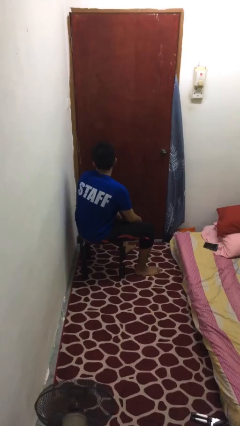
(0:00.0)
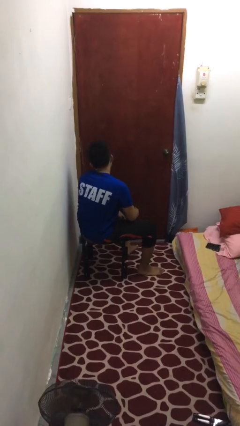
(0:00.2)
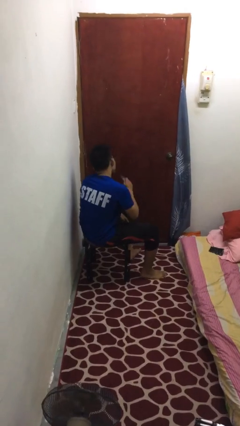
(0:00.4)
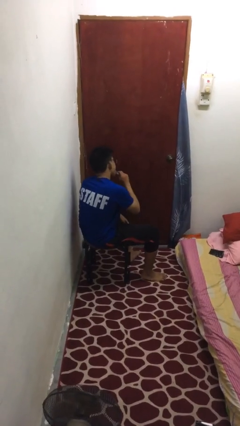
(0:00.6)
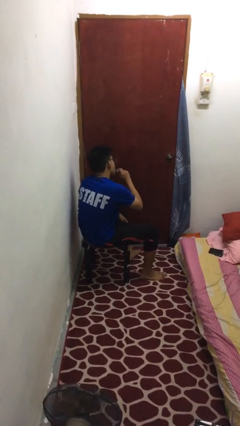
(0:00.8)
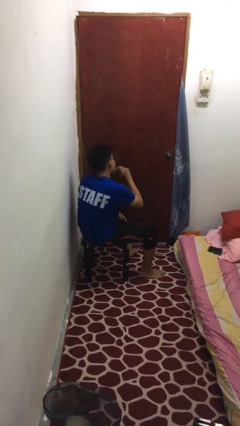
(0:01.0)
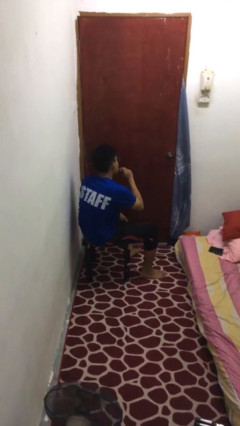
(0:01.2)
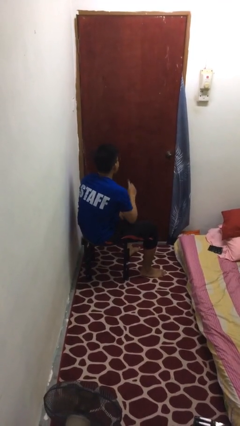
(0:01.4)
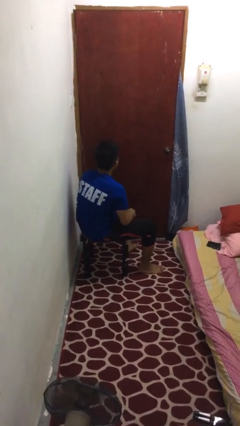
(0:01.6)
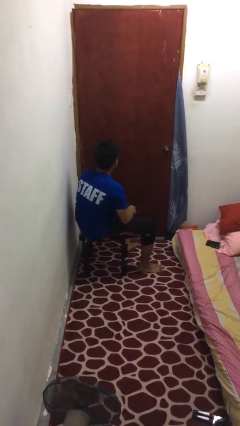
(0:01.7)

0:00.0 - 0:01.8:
person vapes

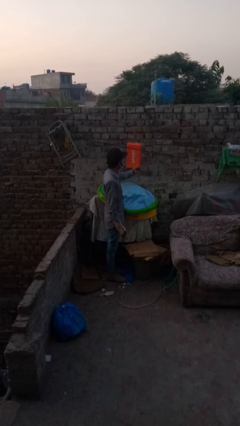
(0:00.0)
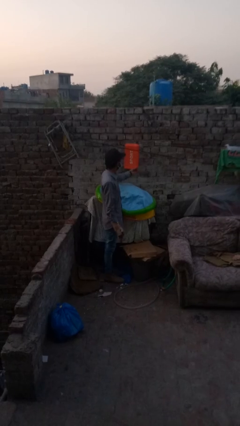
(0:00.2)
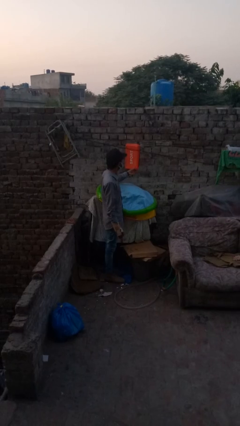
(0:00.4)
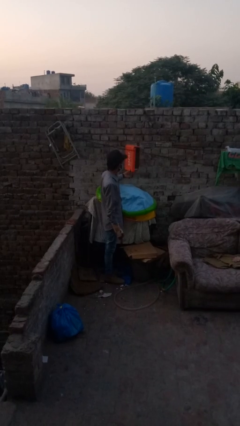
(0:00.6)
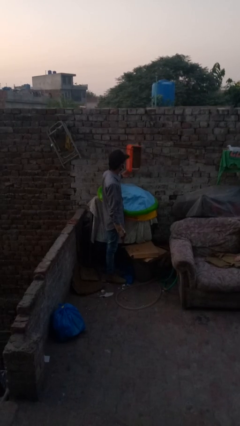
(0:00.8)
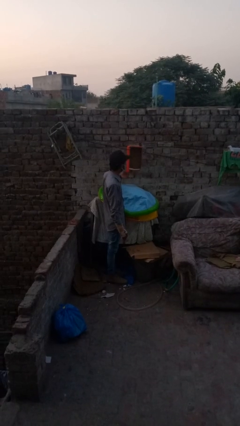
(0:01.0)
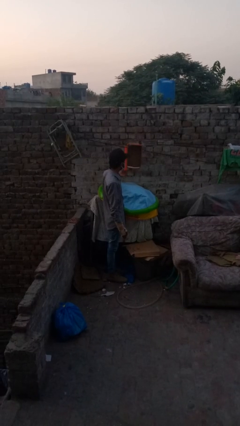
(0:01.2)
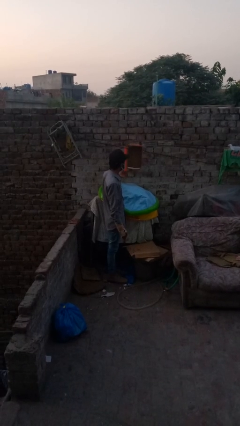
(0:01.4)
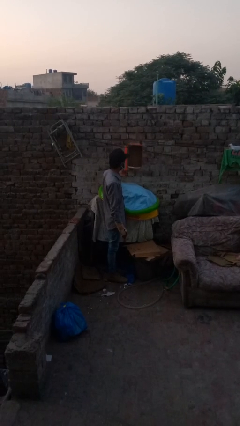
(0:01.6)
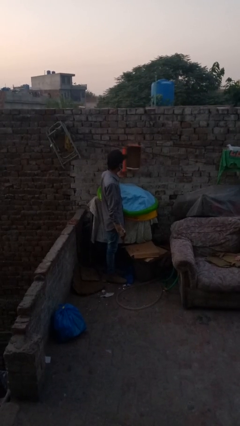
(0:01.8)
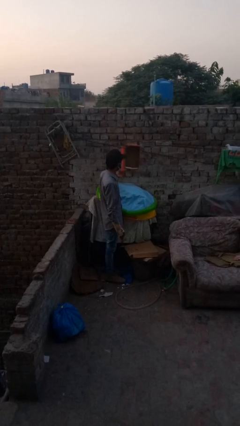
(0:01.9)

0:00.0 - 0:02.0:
person opens mailbox

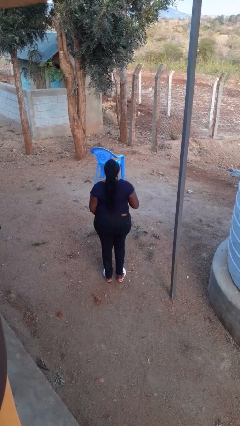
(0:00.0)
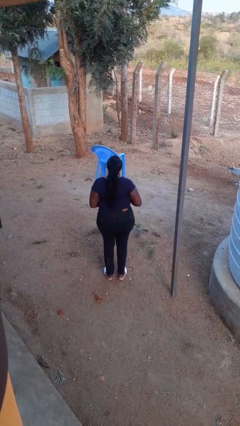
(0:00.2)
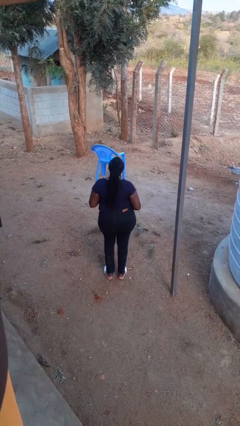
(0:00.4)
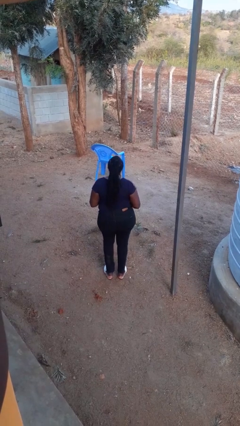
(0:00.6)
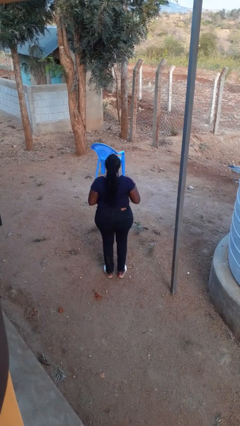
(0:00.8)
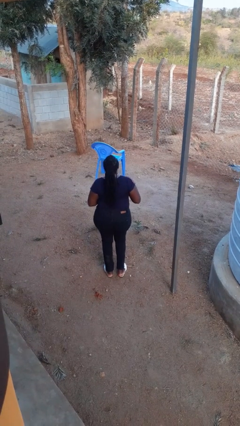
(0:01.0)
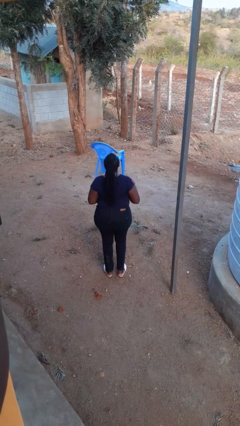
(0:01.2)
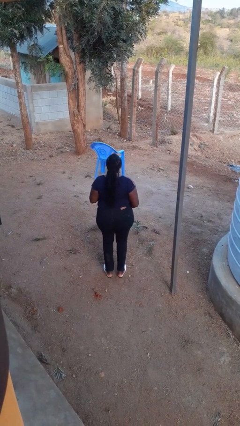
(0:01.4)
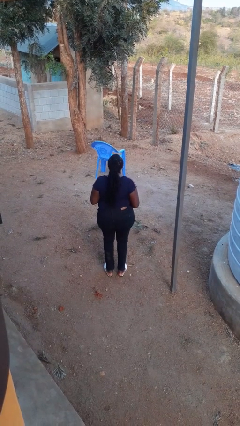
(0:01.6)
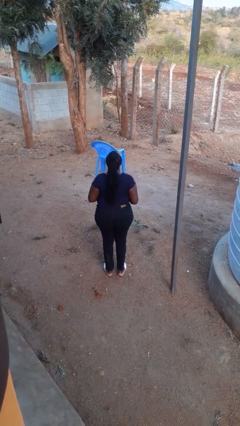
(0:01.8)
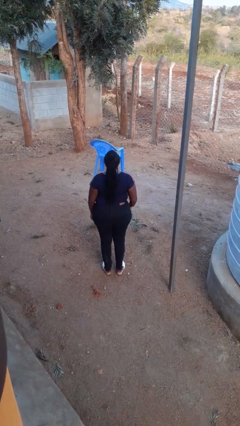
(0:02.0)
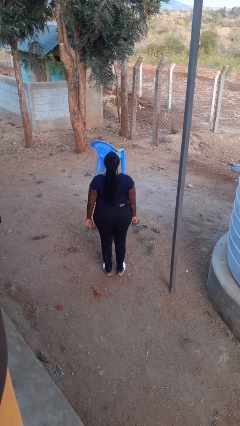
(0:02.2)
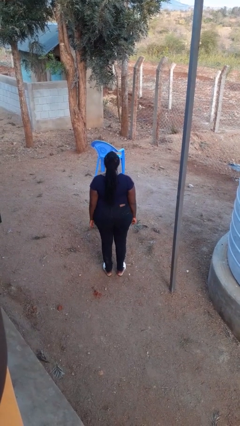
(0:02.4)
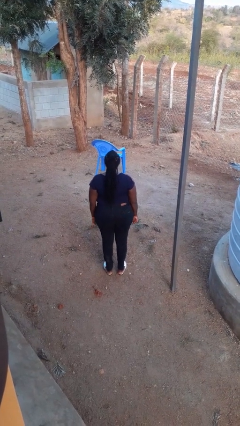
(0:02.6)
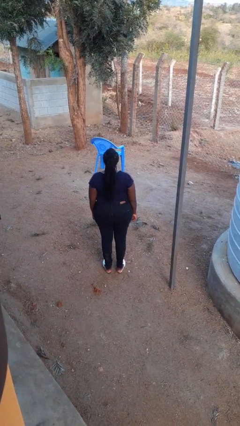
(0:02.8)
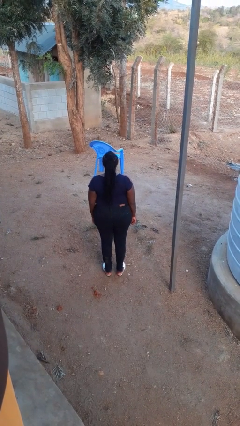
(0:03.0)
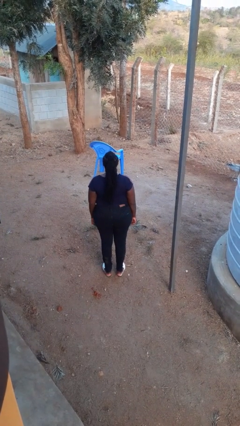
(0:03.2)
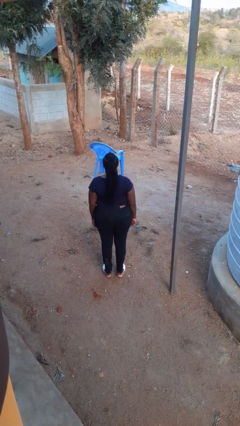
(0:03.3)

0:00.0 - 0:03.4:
person wiggles hips

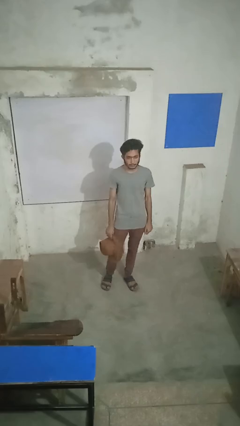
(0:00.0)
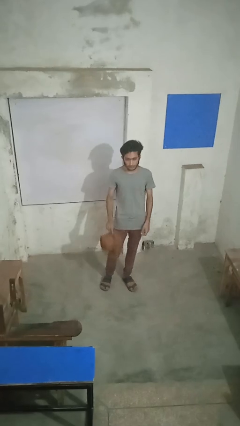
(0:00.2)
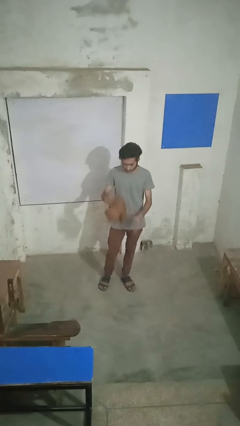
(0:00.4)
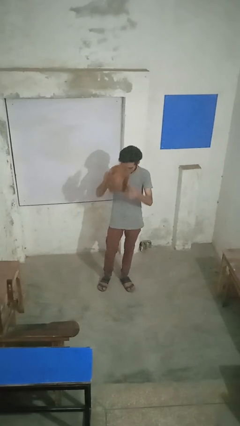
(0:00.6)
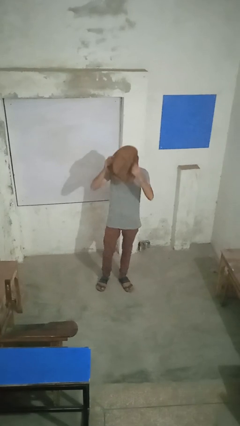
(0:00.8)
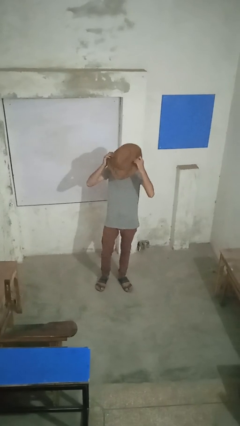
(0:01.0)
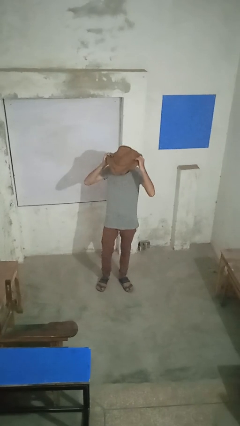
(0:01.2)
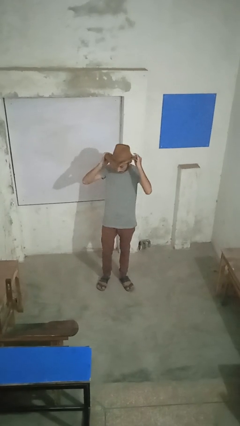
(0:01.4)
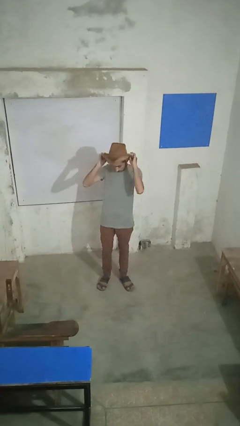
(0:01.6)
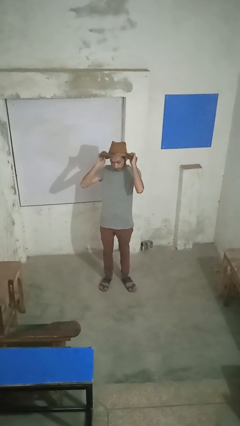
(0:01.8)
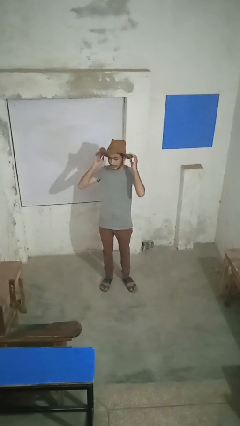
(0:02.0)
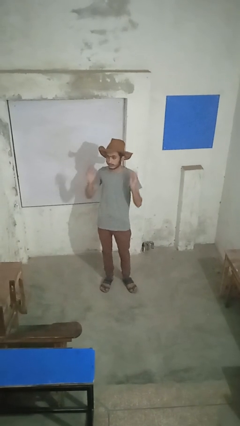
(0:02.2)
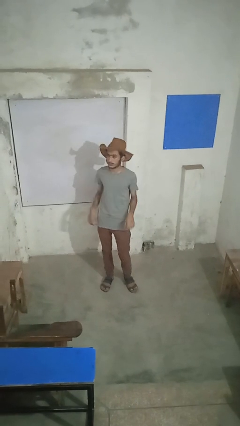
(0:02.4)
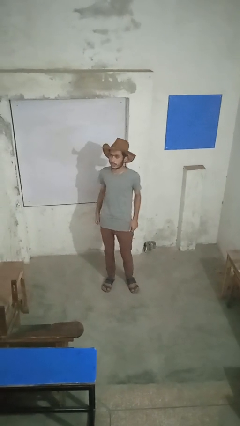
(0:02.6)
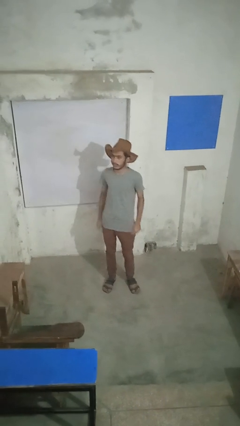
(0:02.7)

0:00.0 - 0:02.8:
person puts on hat

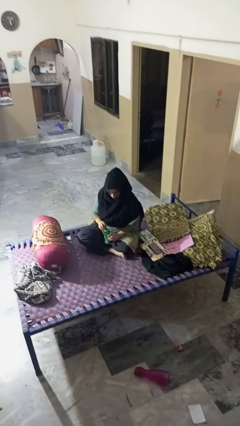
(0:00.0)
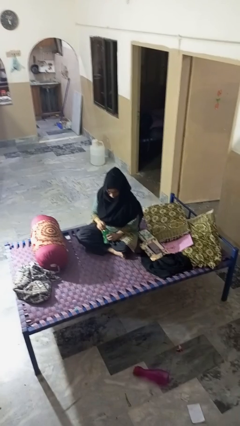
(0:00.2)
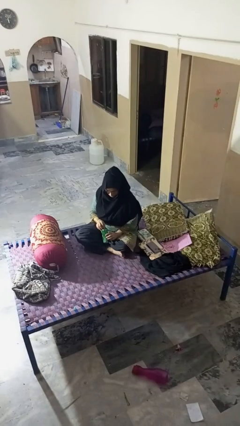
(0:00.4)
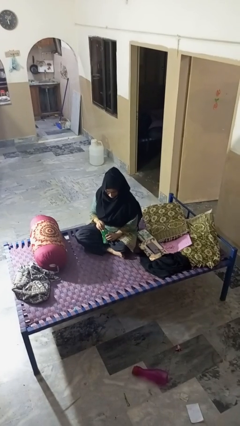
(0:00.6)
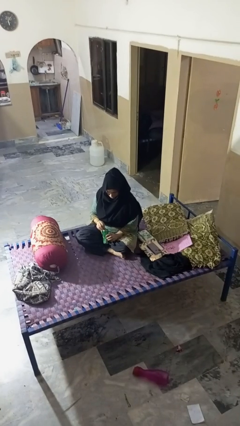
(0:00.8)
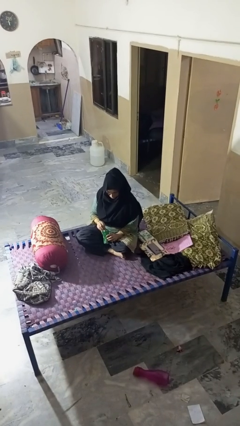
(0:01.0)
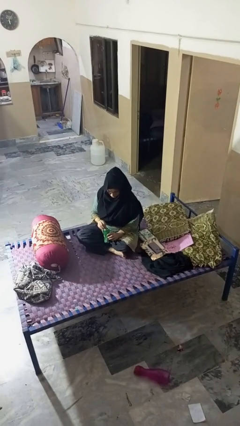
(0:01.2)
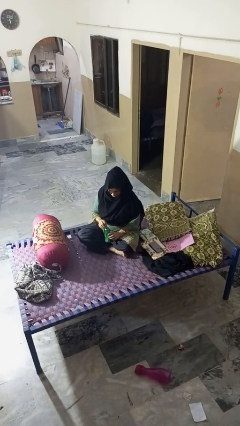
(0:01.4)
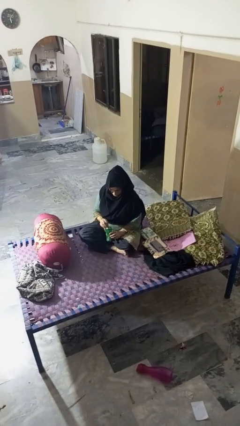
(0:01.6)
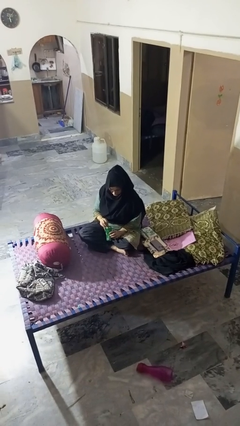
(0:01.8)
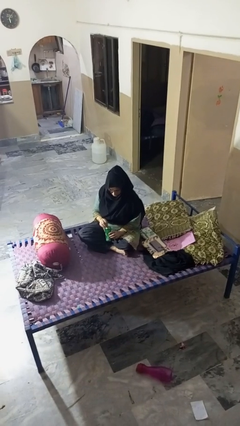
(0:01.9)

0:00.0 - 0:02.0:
person opens can with can opener

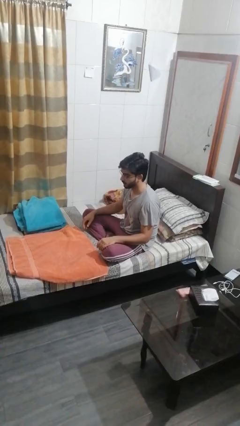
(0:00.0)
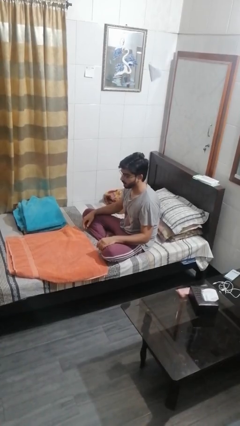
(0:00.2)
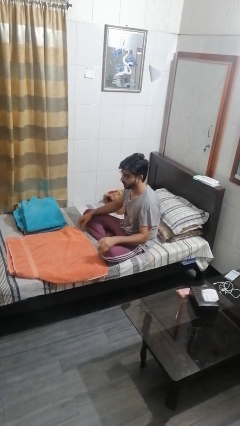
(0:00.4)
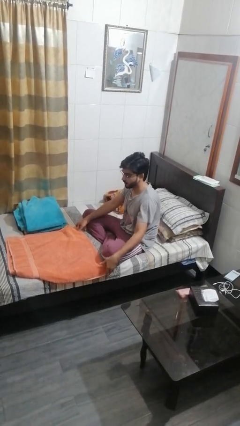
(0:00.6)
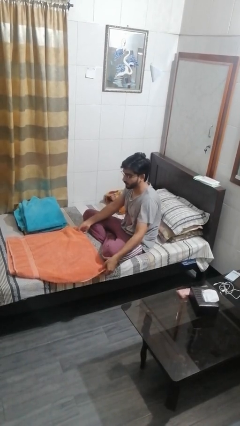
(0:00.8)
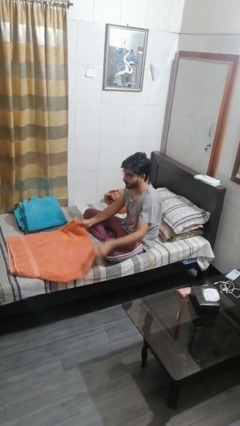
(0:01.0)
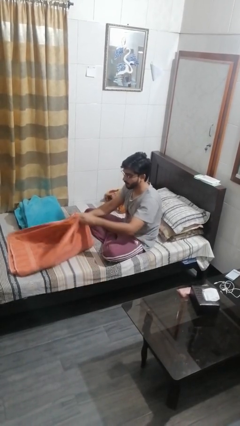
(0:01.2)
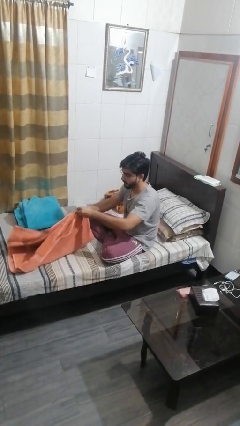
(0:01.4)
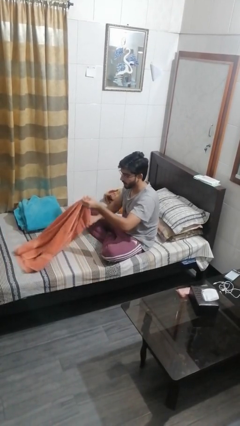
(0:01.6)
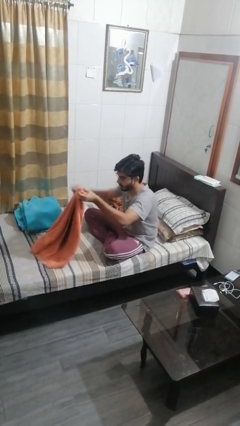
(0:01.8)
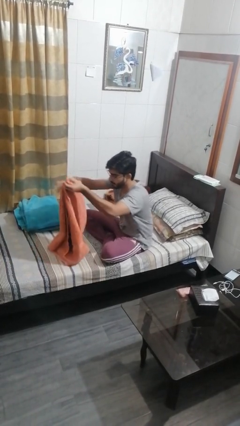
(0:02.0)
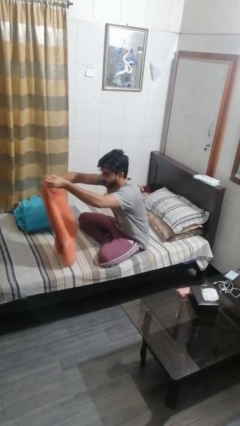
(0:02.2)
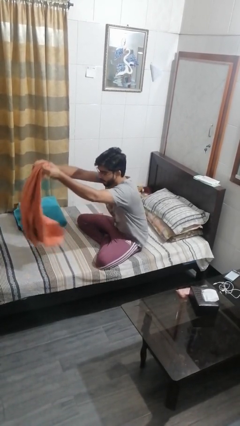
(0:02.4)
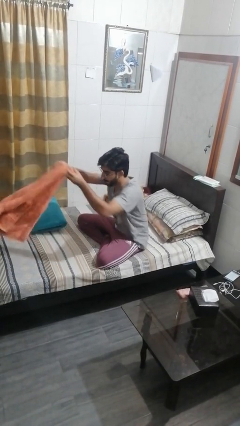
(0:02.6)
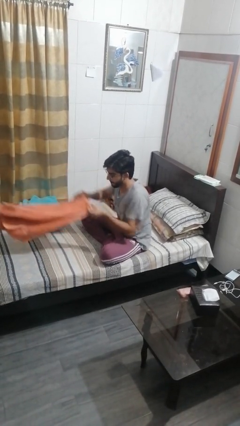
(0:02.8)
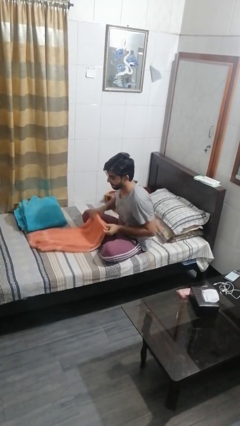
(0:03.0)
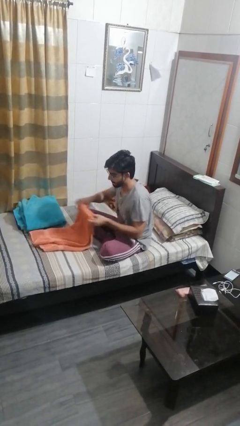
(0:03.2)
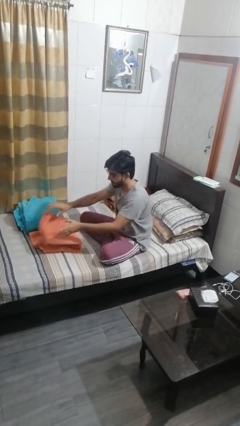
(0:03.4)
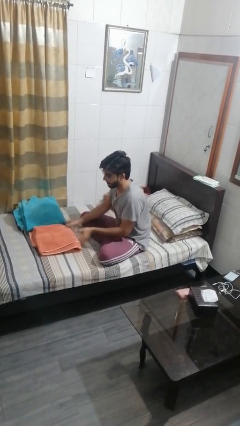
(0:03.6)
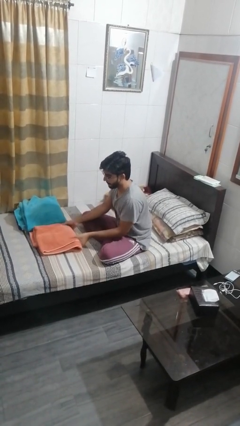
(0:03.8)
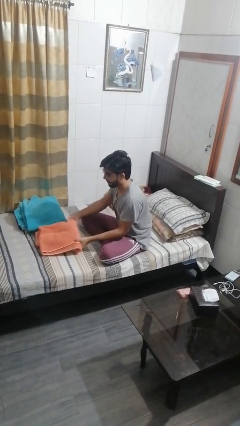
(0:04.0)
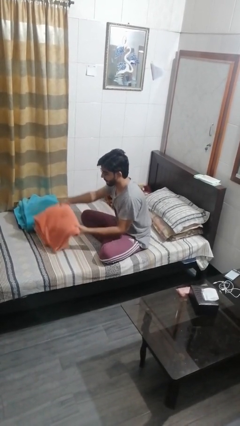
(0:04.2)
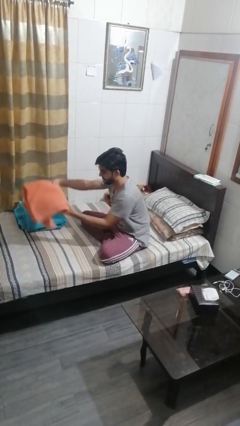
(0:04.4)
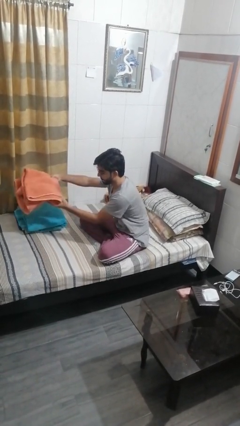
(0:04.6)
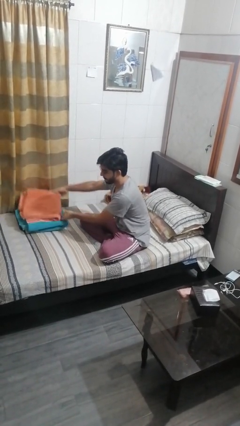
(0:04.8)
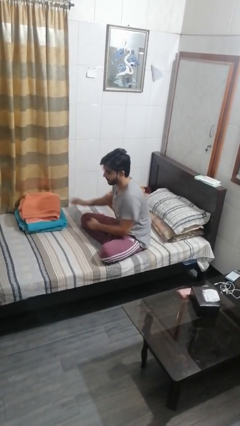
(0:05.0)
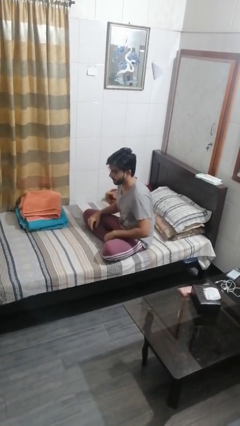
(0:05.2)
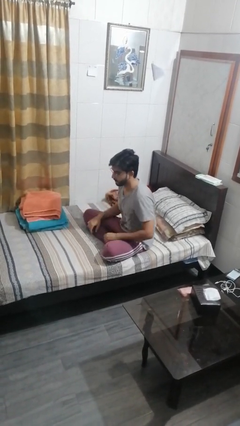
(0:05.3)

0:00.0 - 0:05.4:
person folds towel
